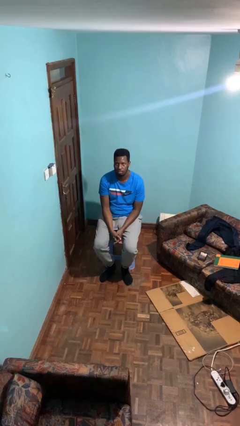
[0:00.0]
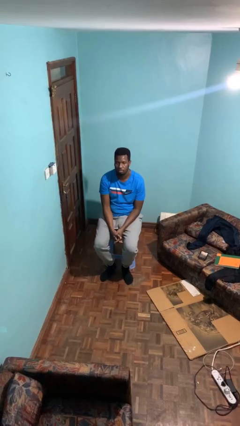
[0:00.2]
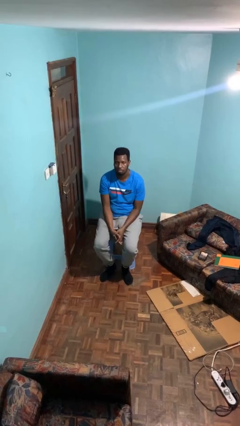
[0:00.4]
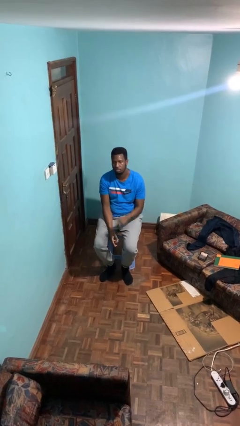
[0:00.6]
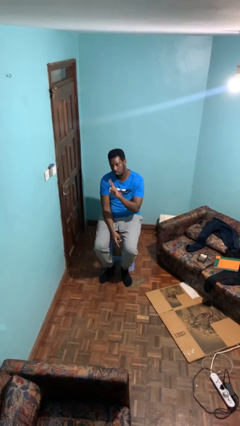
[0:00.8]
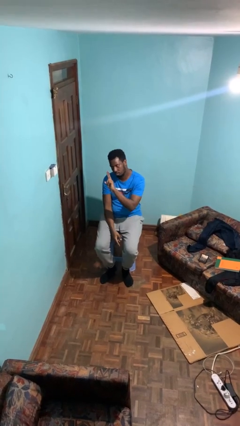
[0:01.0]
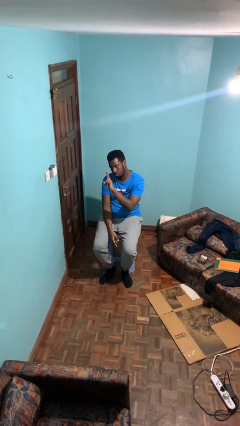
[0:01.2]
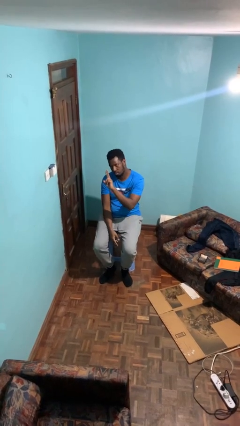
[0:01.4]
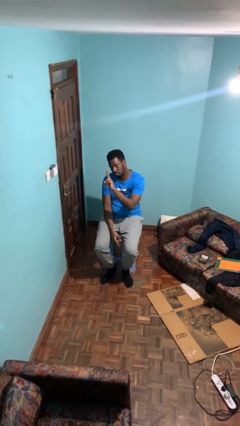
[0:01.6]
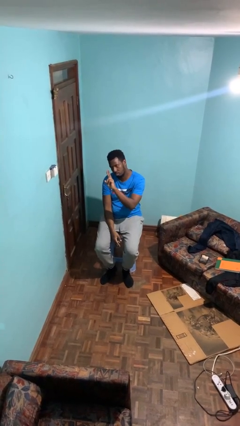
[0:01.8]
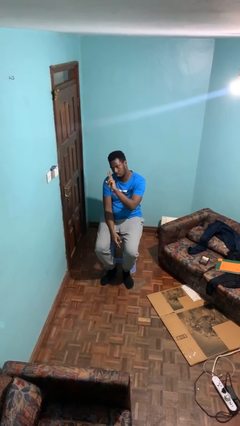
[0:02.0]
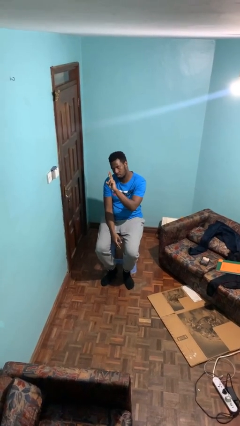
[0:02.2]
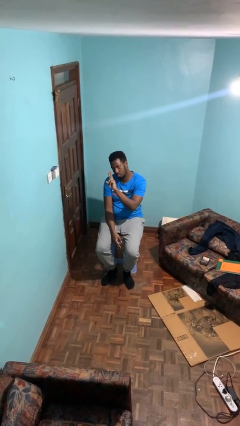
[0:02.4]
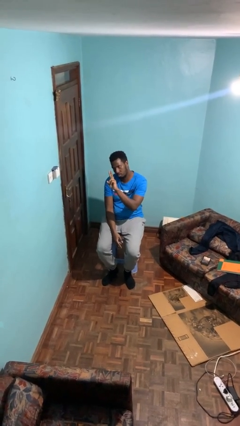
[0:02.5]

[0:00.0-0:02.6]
person gestures peace

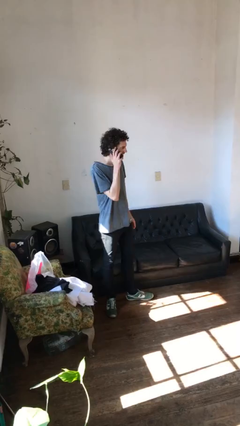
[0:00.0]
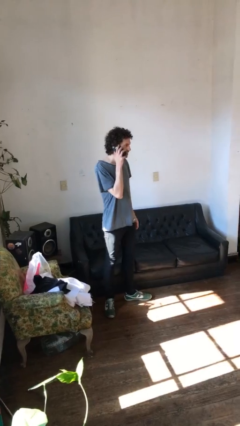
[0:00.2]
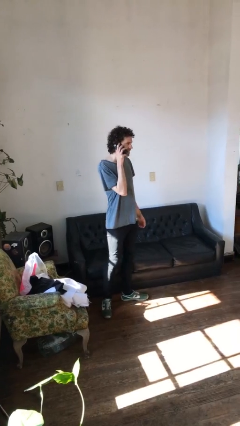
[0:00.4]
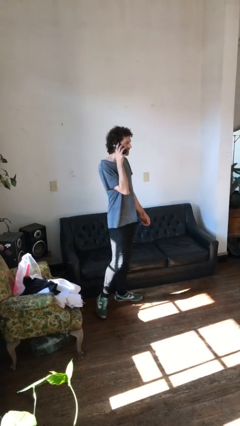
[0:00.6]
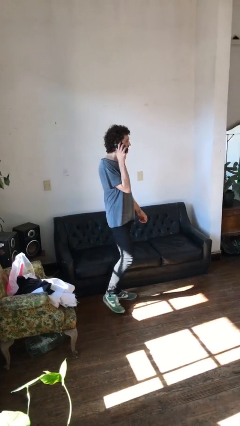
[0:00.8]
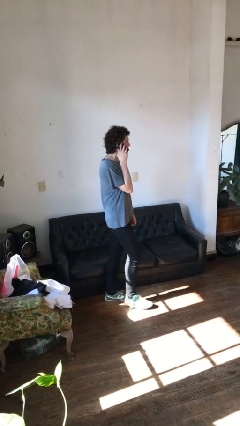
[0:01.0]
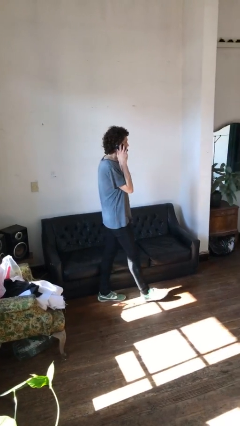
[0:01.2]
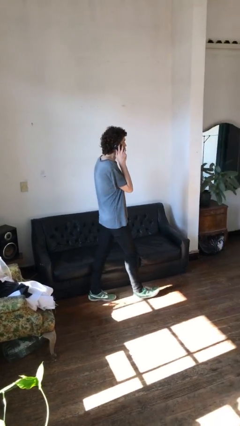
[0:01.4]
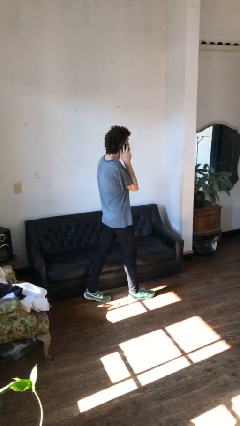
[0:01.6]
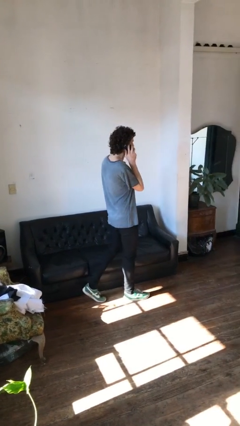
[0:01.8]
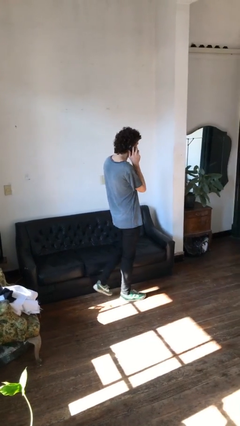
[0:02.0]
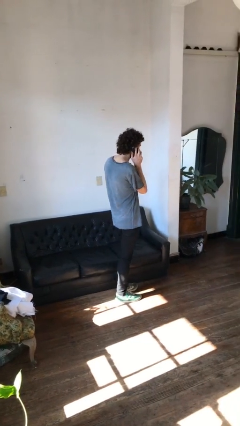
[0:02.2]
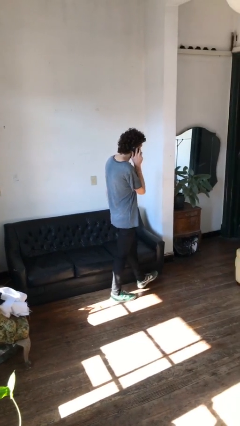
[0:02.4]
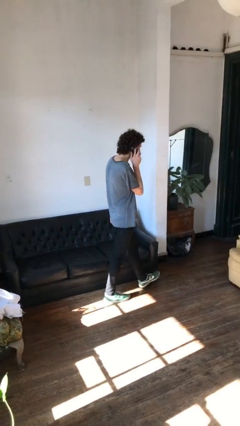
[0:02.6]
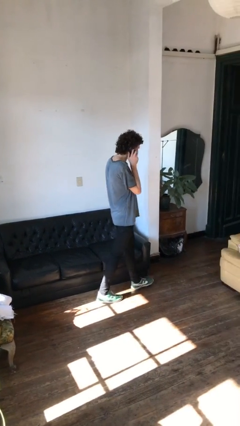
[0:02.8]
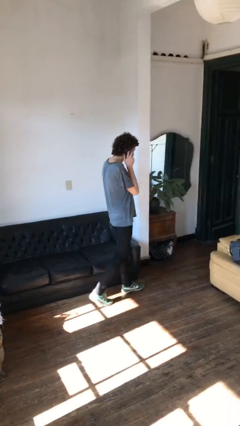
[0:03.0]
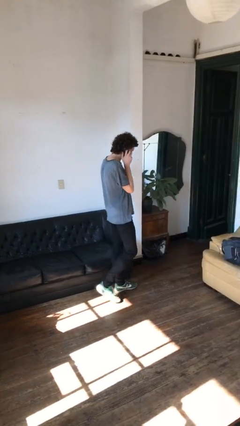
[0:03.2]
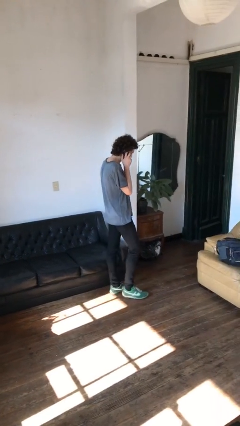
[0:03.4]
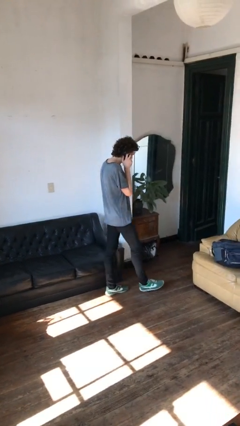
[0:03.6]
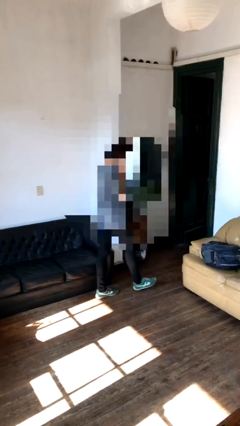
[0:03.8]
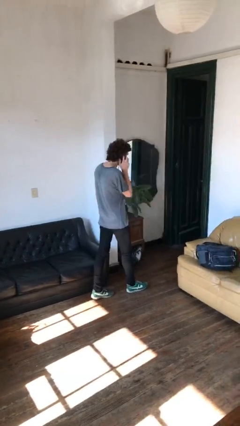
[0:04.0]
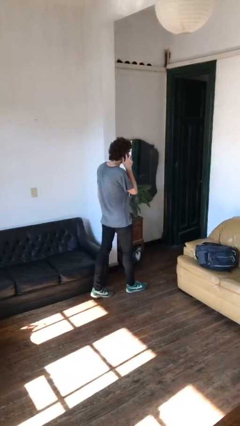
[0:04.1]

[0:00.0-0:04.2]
person talks on phone

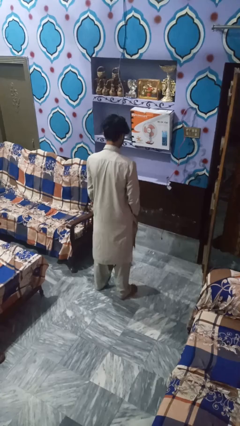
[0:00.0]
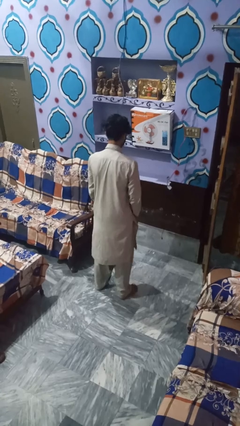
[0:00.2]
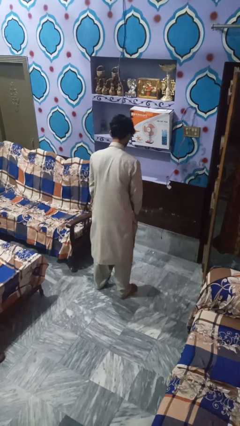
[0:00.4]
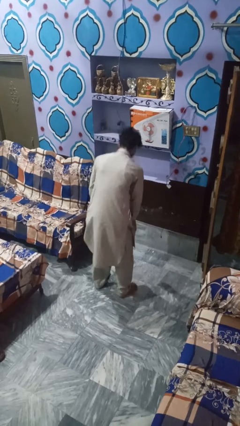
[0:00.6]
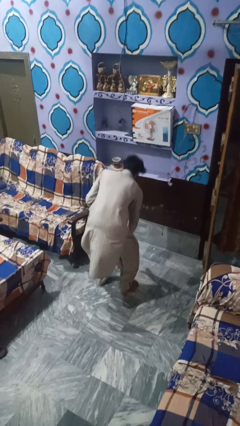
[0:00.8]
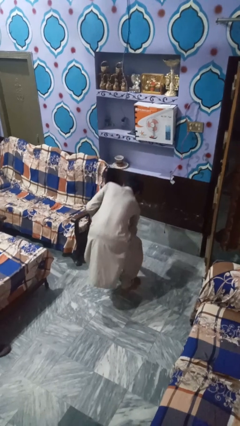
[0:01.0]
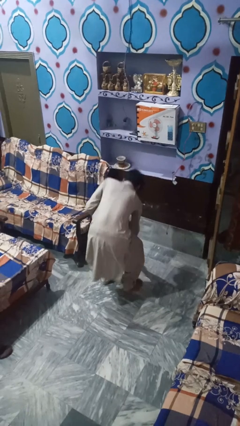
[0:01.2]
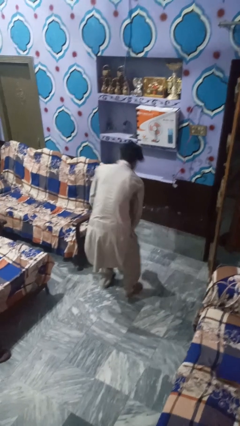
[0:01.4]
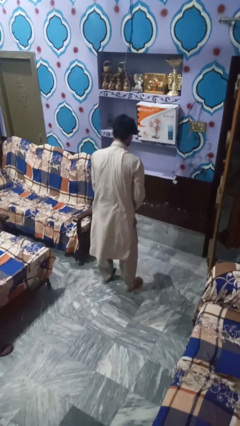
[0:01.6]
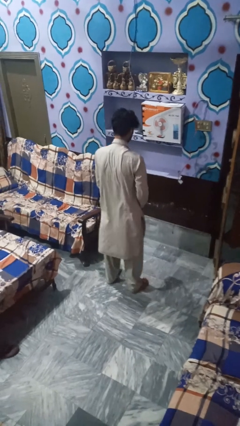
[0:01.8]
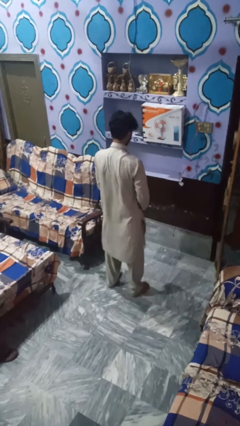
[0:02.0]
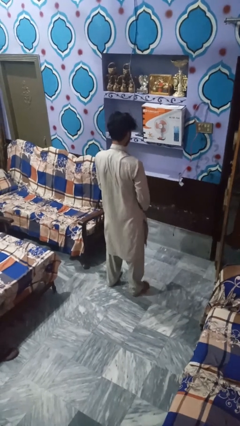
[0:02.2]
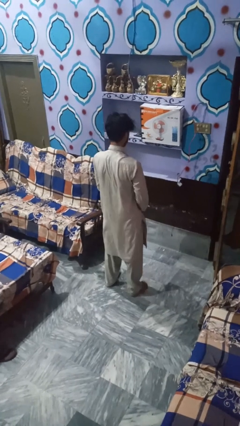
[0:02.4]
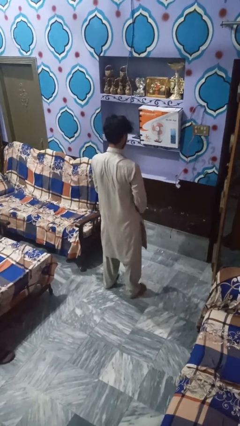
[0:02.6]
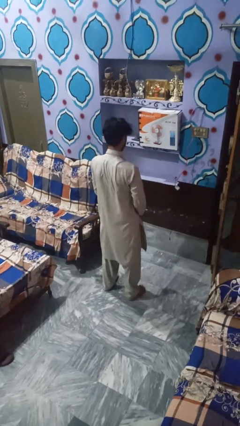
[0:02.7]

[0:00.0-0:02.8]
person picks up object from floor

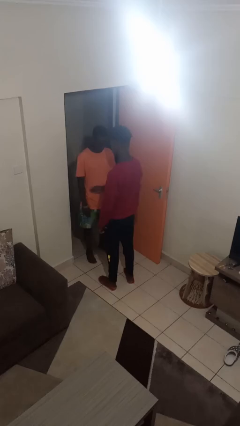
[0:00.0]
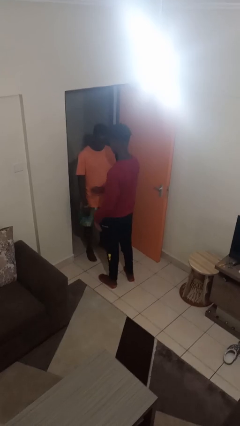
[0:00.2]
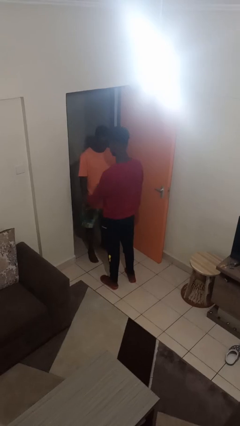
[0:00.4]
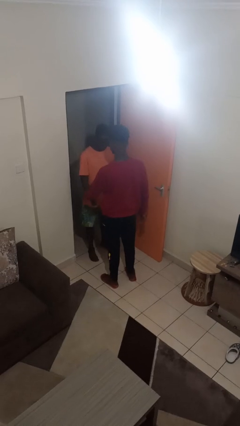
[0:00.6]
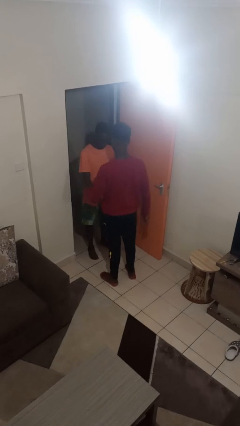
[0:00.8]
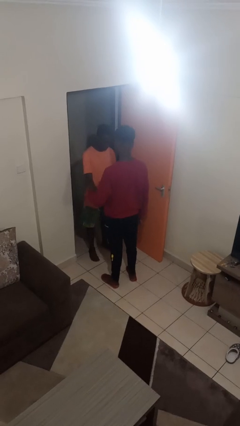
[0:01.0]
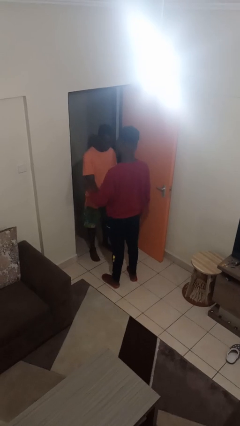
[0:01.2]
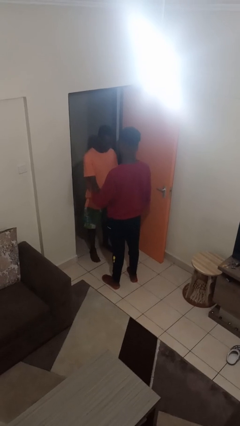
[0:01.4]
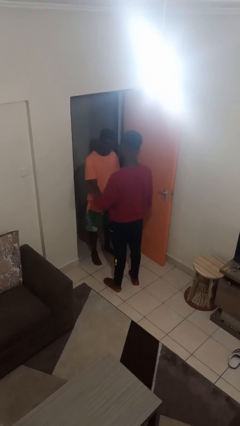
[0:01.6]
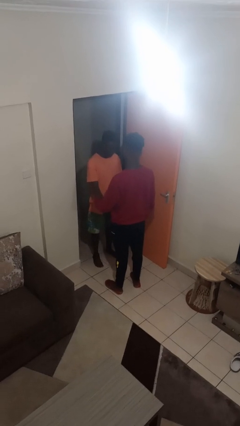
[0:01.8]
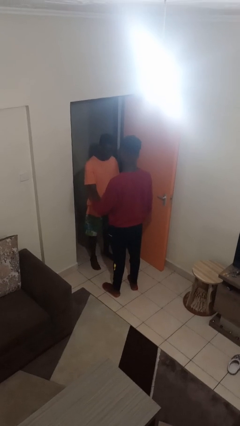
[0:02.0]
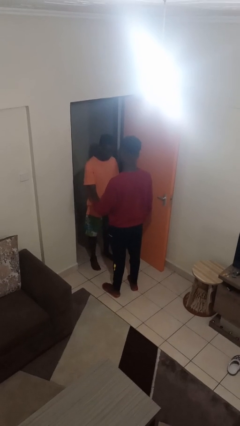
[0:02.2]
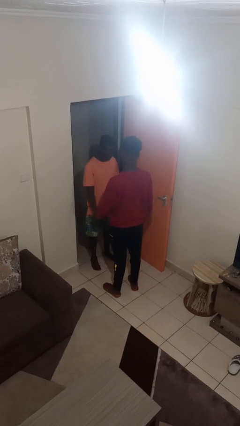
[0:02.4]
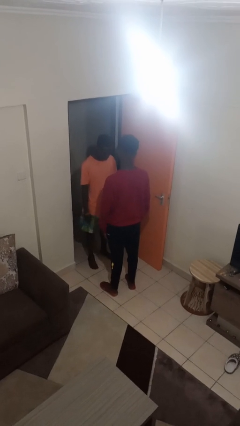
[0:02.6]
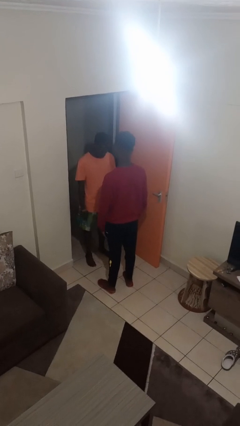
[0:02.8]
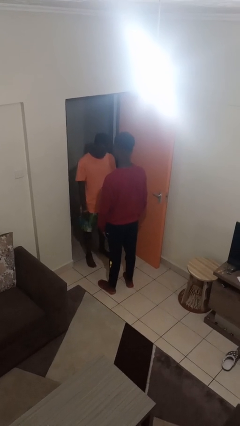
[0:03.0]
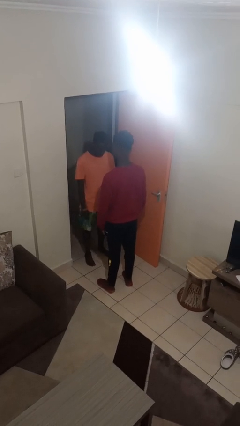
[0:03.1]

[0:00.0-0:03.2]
person grabs person by forearm

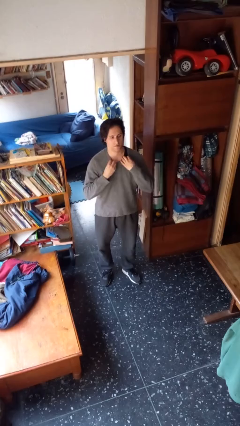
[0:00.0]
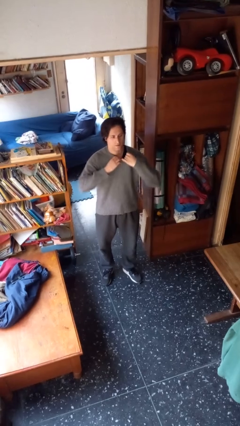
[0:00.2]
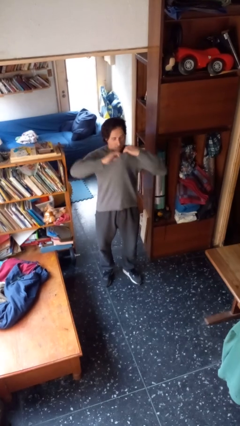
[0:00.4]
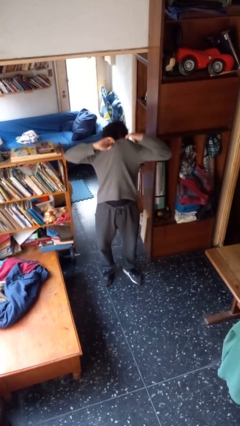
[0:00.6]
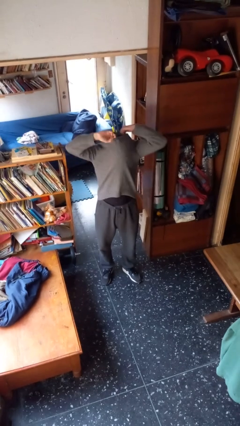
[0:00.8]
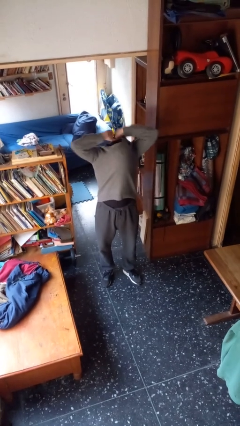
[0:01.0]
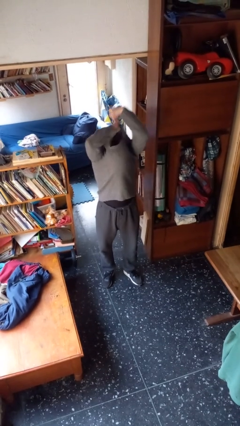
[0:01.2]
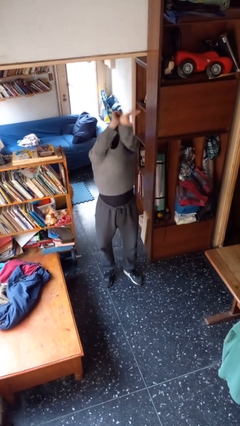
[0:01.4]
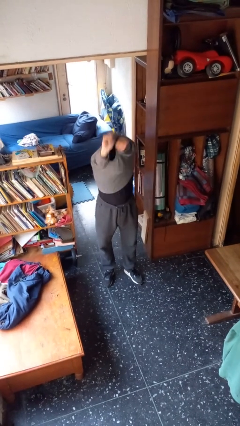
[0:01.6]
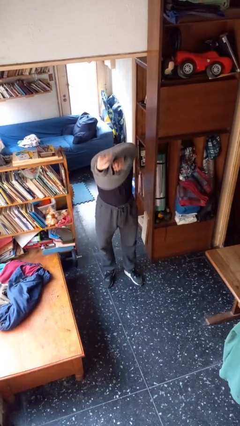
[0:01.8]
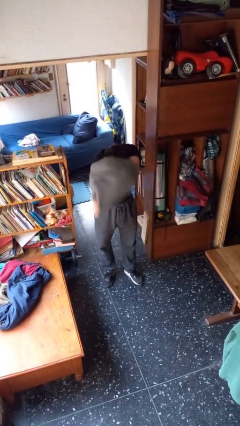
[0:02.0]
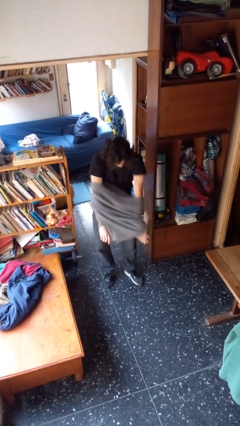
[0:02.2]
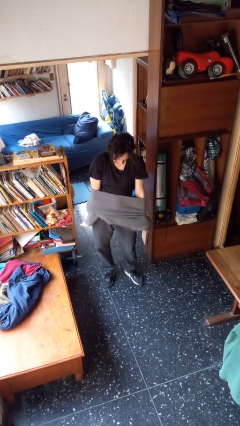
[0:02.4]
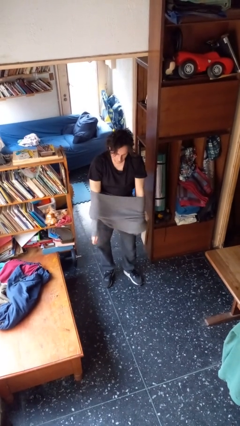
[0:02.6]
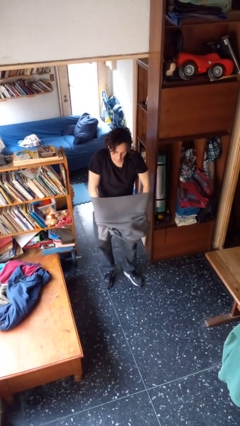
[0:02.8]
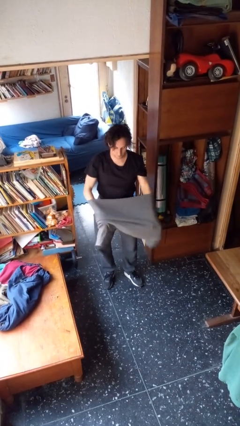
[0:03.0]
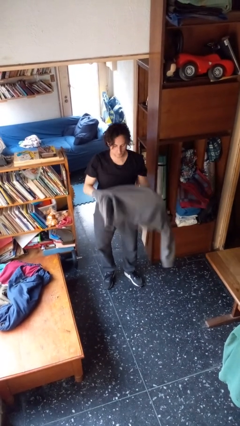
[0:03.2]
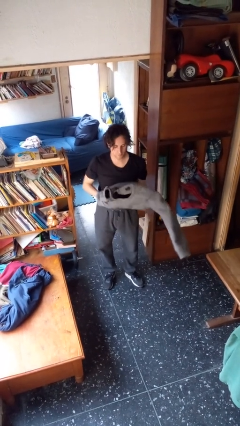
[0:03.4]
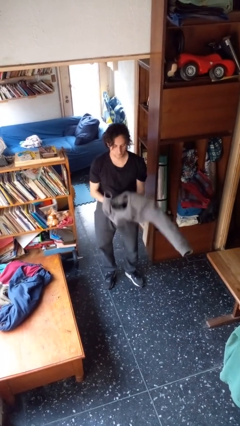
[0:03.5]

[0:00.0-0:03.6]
person takes off shirt

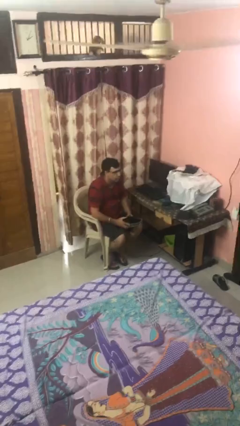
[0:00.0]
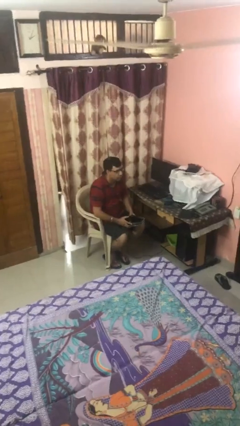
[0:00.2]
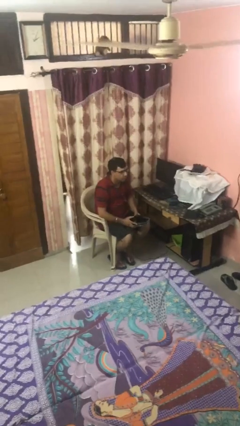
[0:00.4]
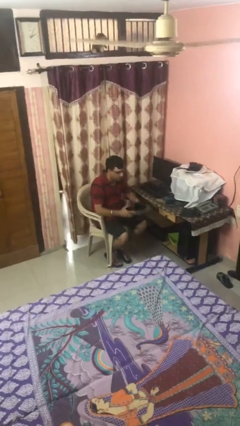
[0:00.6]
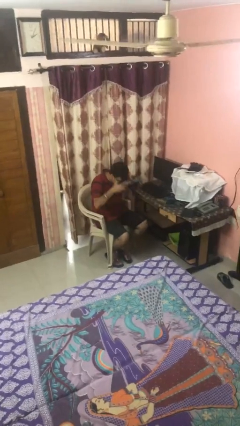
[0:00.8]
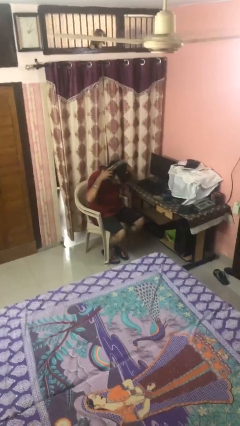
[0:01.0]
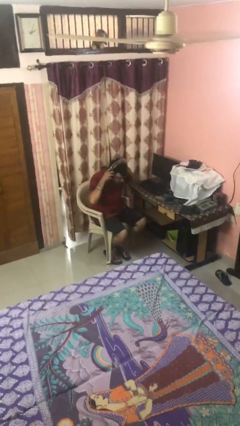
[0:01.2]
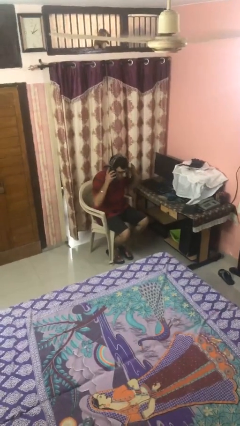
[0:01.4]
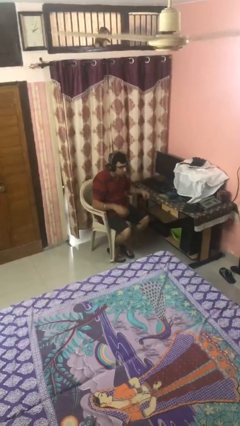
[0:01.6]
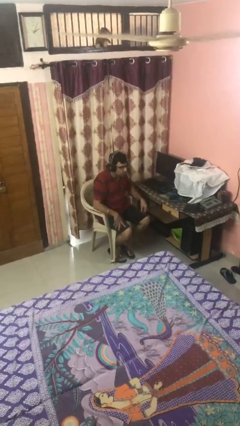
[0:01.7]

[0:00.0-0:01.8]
person puts on headphones
